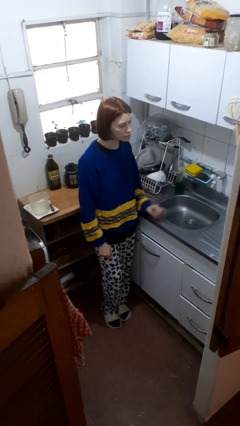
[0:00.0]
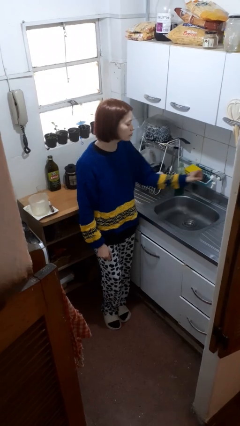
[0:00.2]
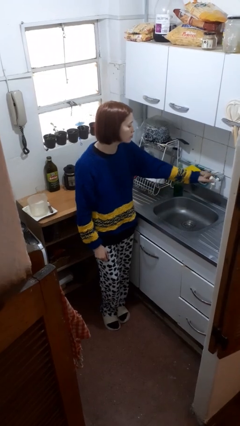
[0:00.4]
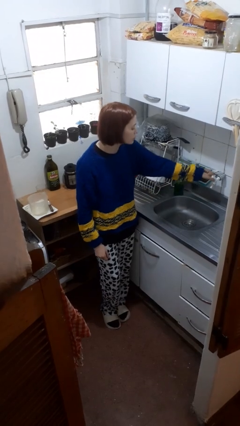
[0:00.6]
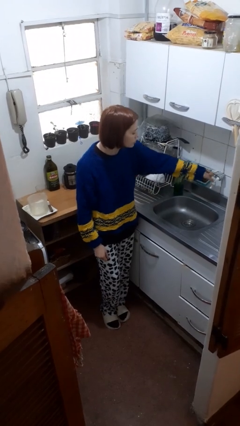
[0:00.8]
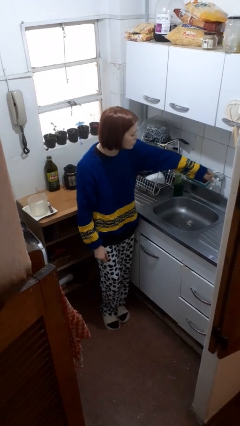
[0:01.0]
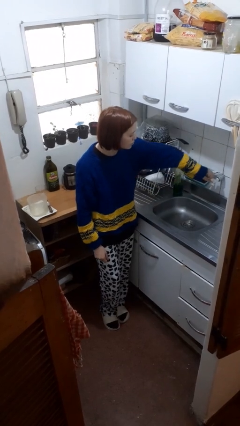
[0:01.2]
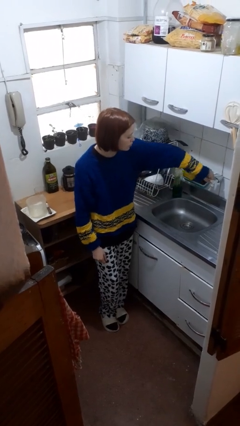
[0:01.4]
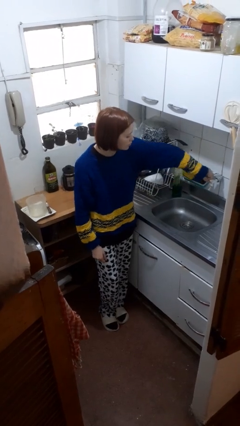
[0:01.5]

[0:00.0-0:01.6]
person turns on faucet

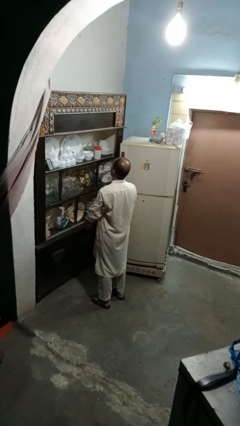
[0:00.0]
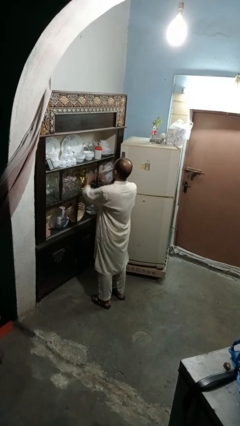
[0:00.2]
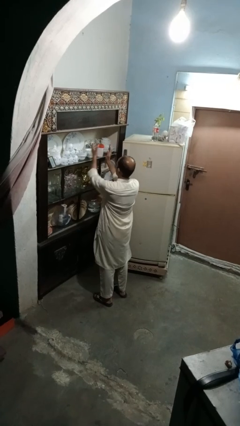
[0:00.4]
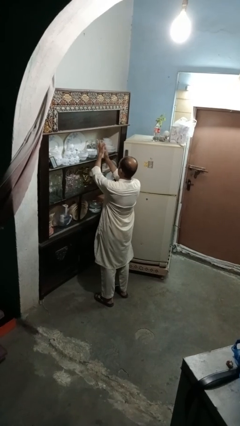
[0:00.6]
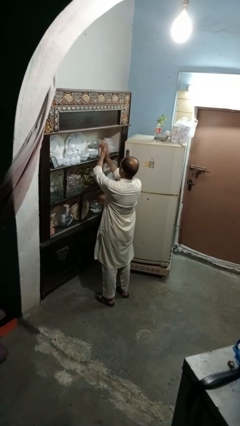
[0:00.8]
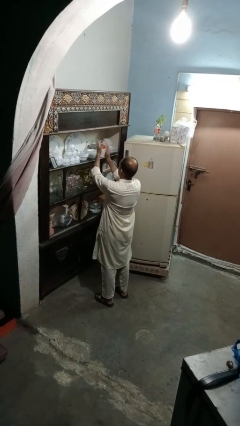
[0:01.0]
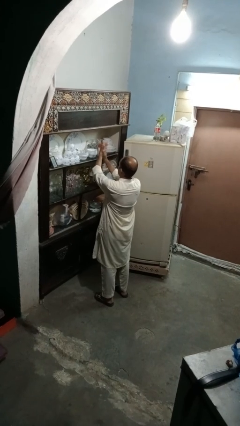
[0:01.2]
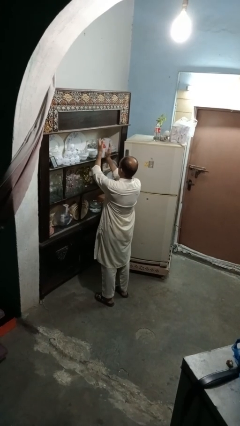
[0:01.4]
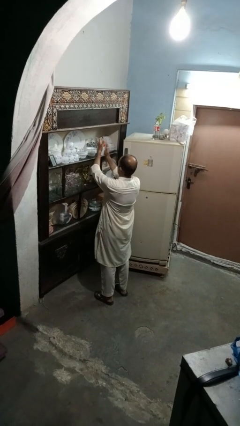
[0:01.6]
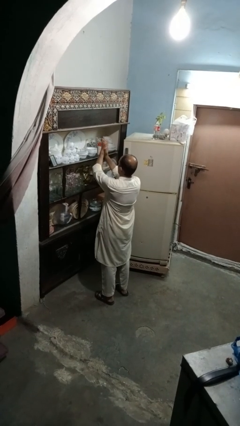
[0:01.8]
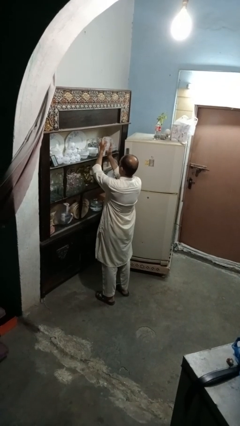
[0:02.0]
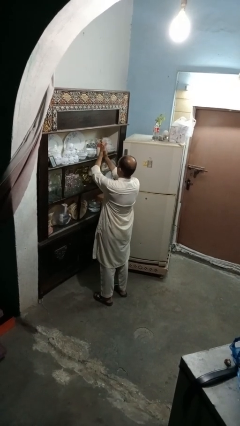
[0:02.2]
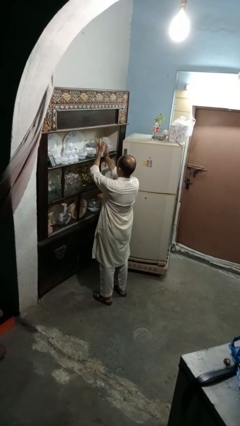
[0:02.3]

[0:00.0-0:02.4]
person claps hands

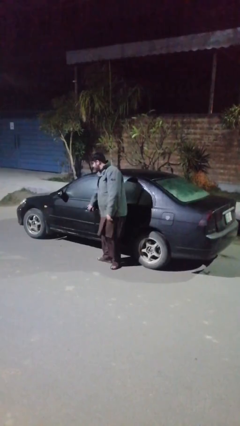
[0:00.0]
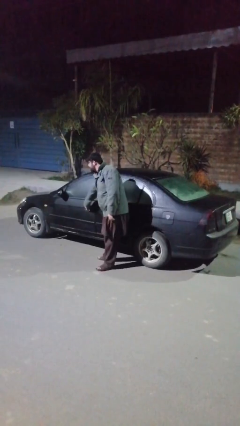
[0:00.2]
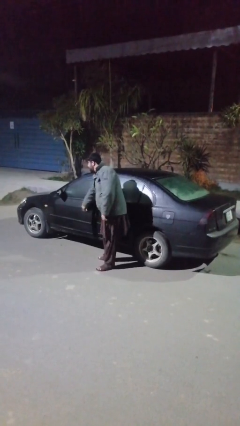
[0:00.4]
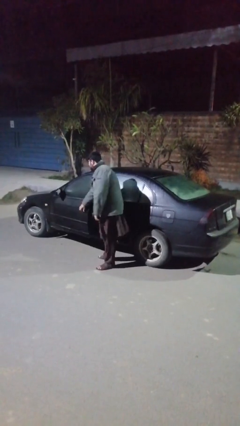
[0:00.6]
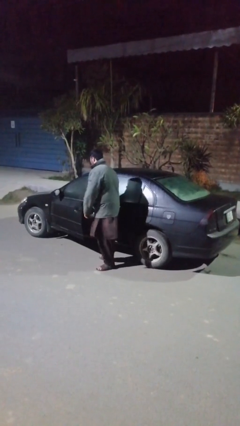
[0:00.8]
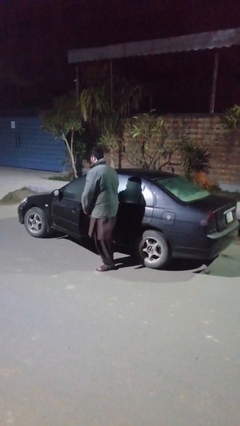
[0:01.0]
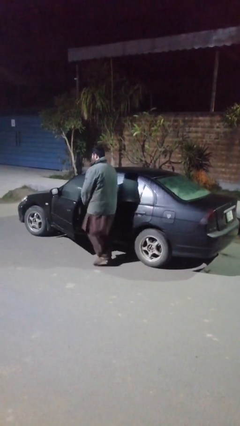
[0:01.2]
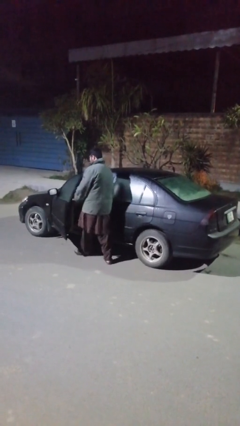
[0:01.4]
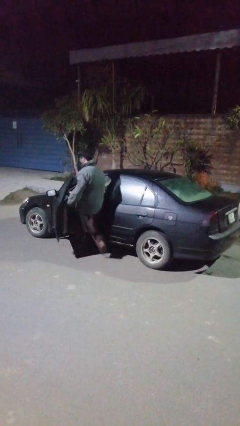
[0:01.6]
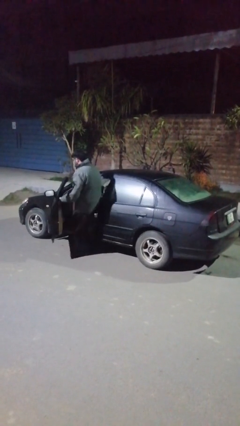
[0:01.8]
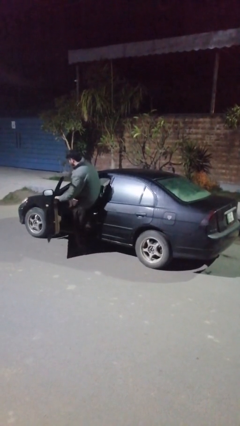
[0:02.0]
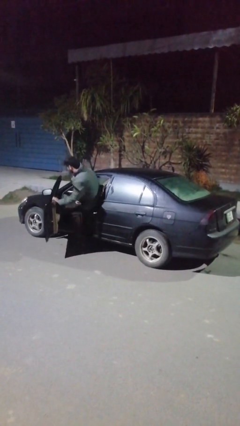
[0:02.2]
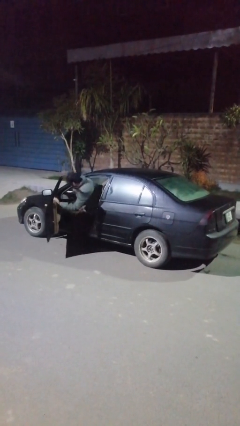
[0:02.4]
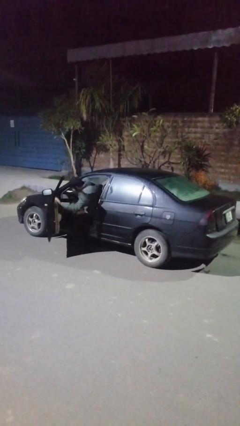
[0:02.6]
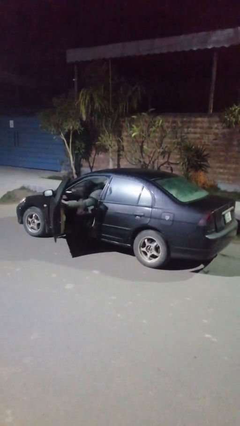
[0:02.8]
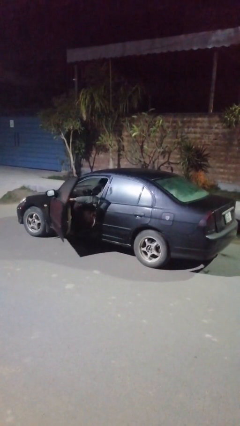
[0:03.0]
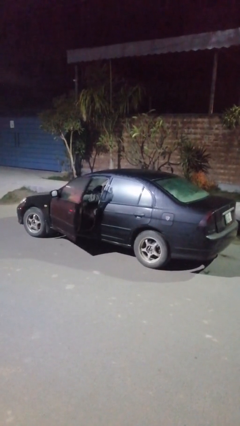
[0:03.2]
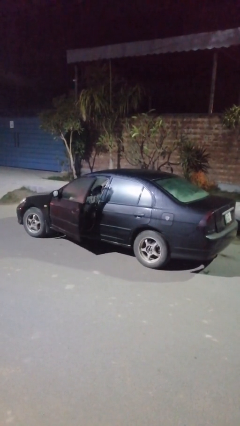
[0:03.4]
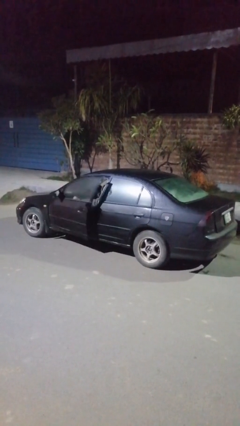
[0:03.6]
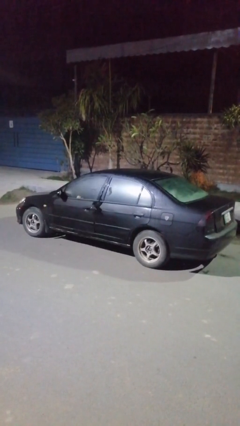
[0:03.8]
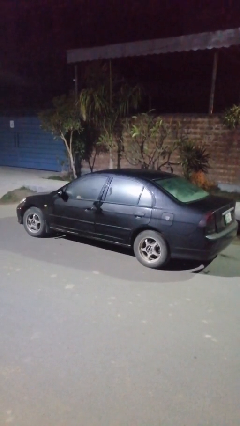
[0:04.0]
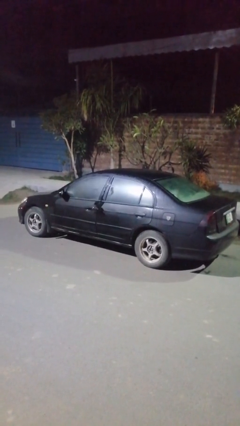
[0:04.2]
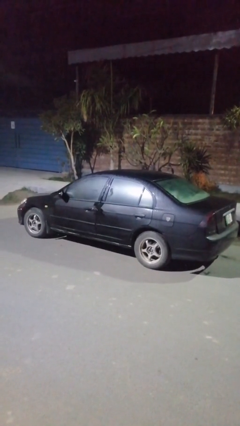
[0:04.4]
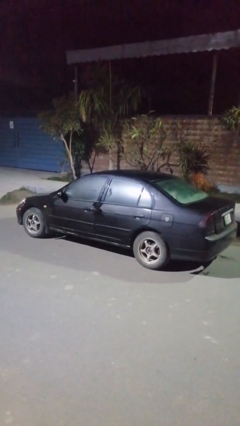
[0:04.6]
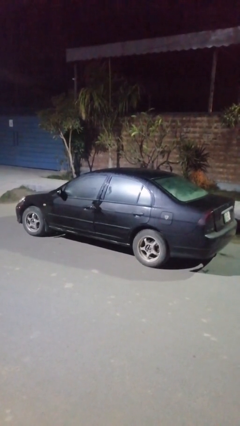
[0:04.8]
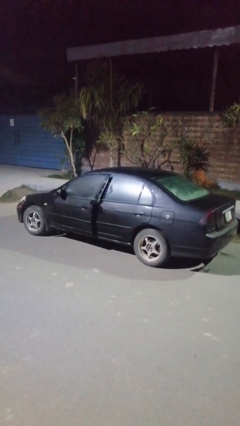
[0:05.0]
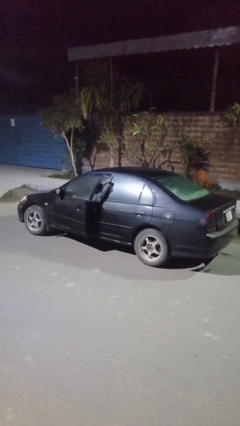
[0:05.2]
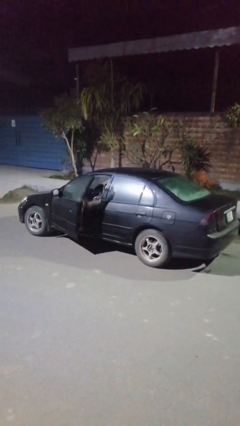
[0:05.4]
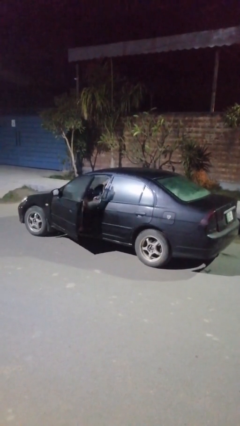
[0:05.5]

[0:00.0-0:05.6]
car picks up person

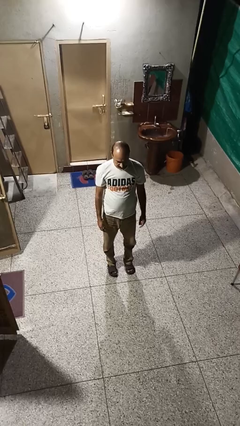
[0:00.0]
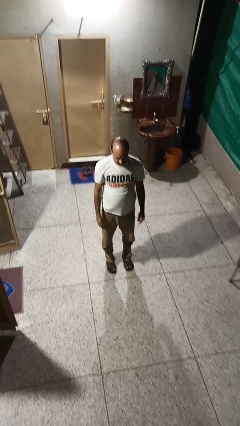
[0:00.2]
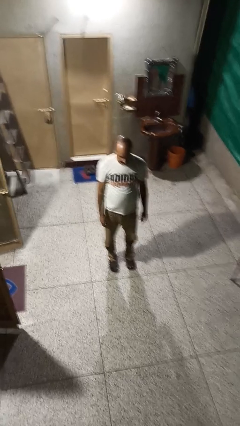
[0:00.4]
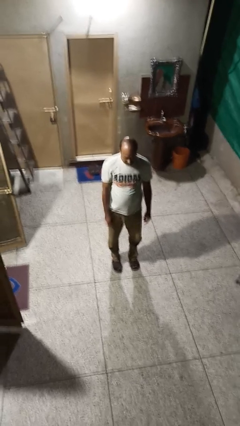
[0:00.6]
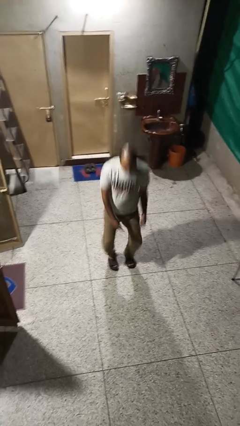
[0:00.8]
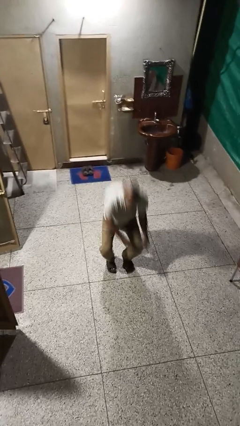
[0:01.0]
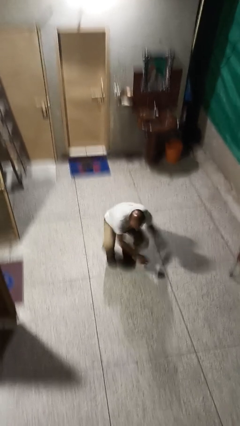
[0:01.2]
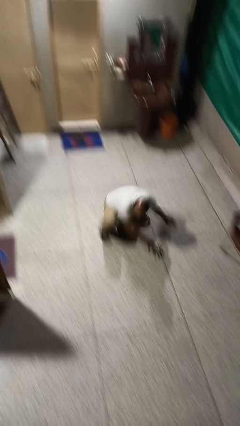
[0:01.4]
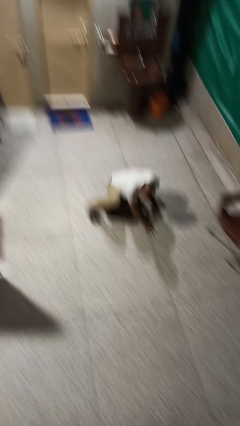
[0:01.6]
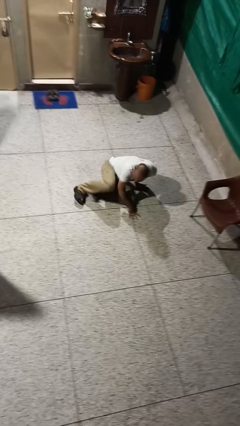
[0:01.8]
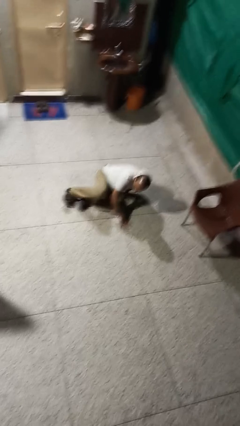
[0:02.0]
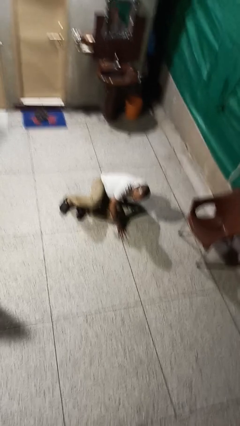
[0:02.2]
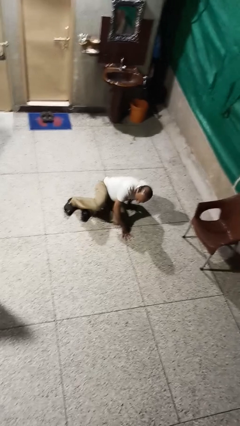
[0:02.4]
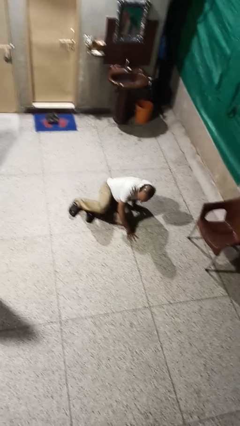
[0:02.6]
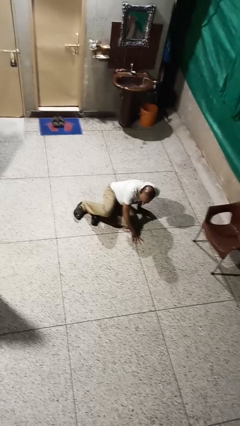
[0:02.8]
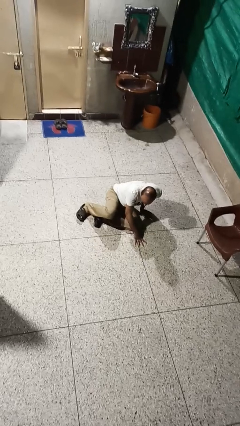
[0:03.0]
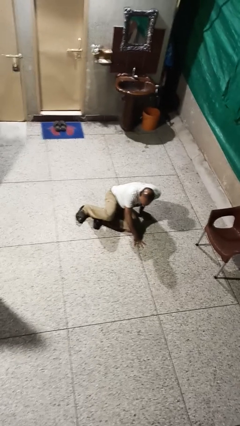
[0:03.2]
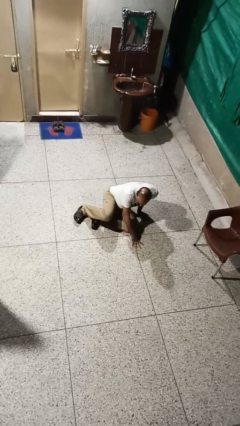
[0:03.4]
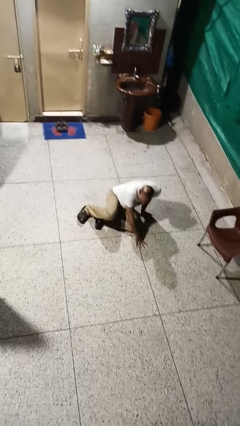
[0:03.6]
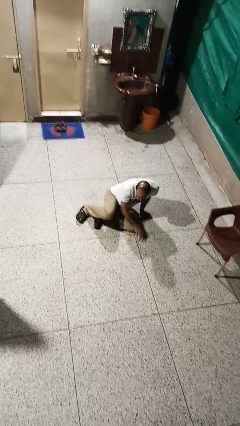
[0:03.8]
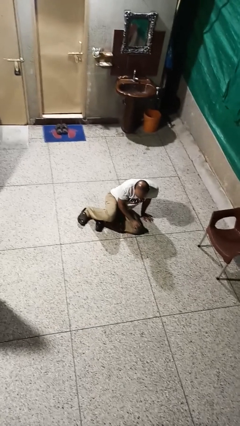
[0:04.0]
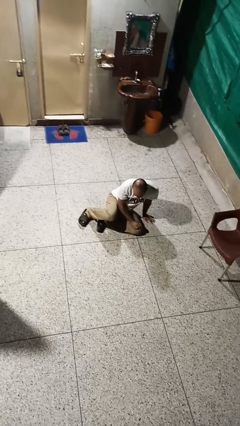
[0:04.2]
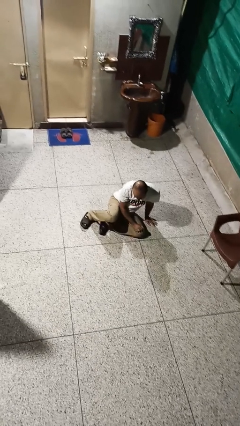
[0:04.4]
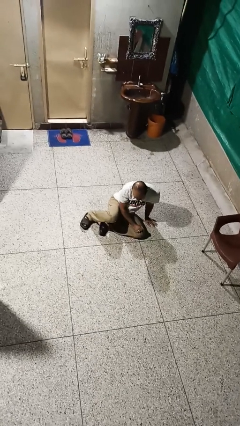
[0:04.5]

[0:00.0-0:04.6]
person falls while standing

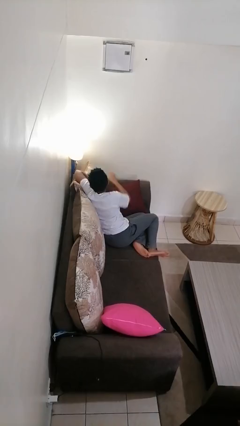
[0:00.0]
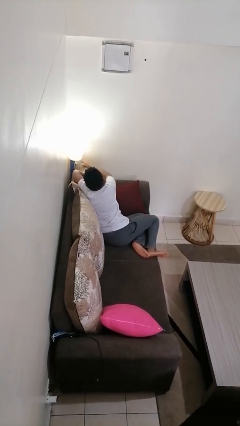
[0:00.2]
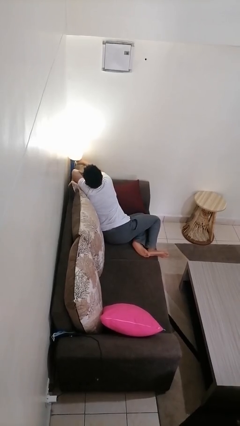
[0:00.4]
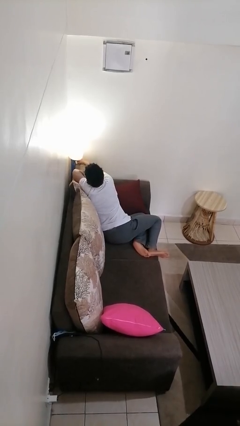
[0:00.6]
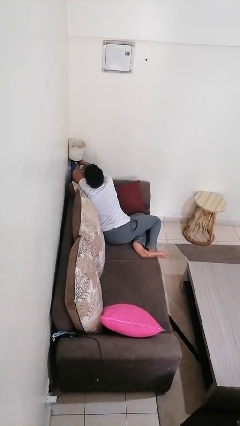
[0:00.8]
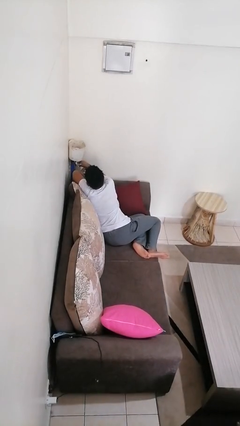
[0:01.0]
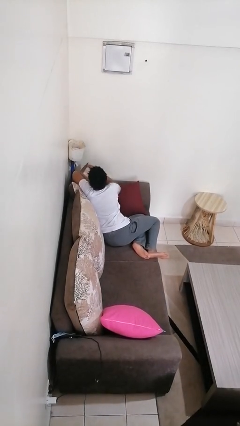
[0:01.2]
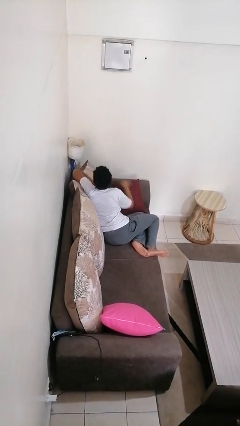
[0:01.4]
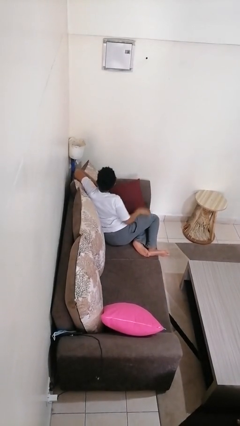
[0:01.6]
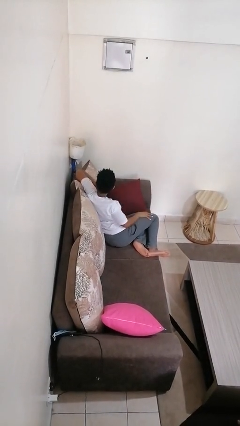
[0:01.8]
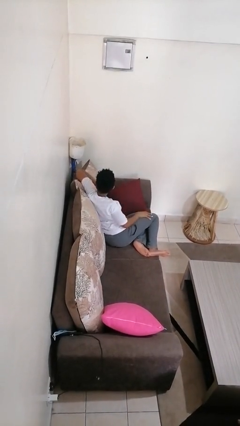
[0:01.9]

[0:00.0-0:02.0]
person turns off lamp

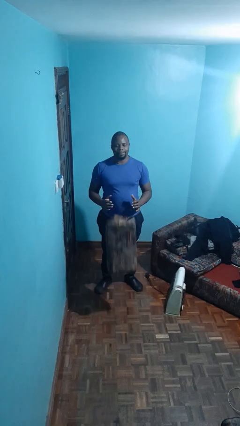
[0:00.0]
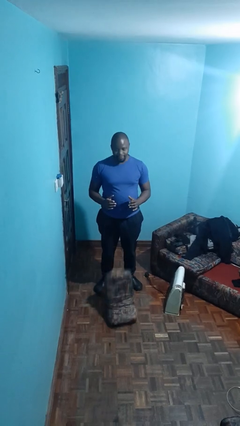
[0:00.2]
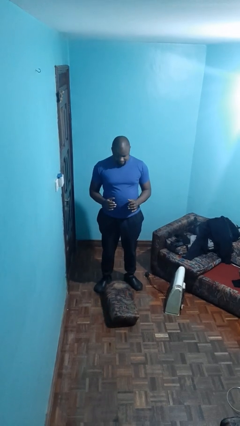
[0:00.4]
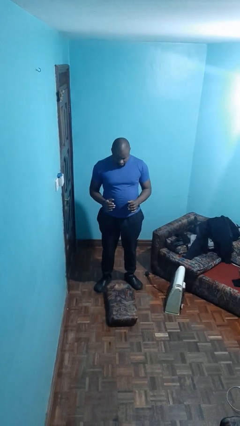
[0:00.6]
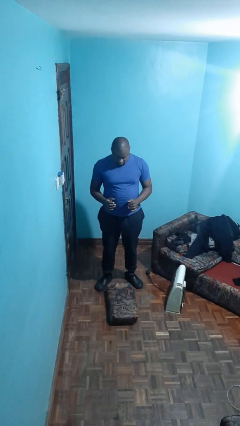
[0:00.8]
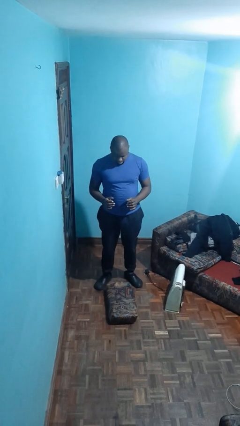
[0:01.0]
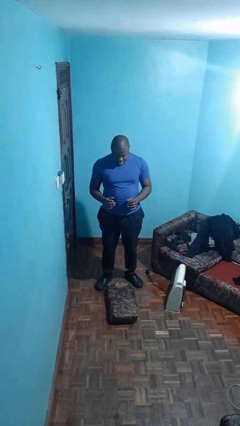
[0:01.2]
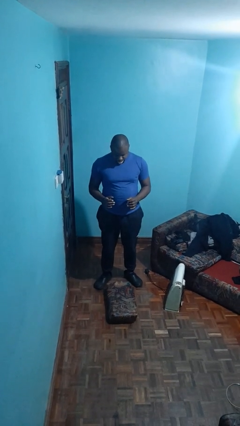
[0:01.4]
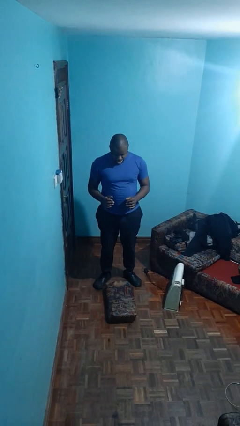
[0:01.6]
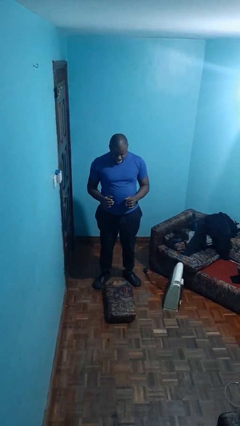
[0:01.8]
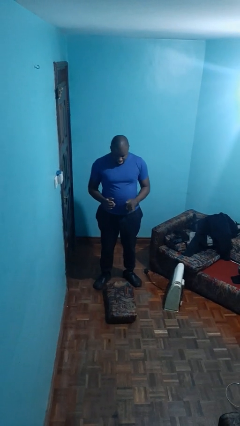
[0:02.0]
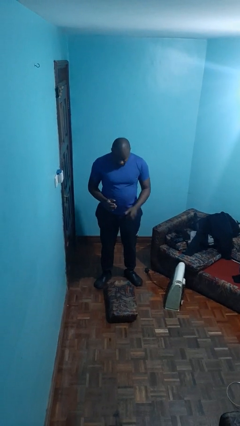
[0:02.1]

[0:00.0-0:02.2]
person drops object
